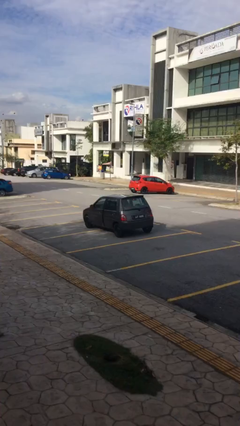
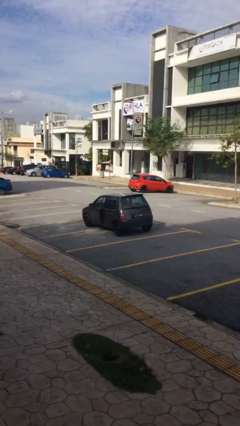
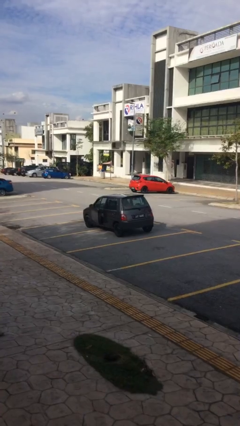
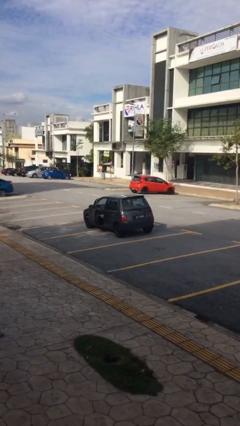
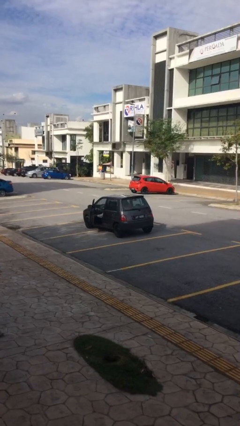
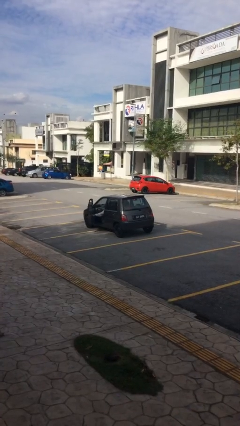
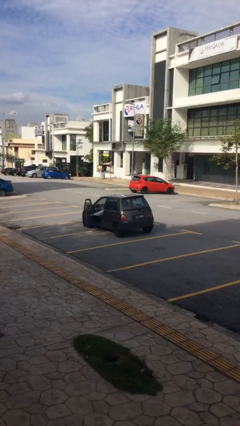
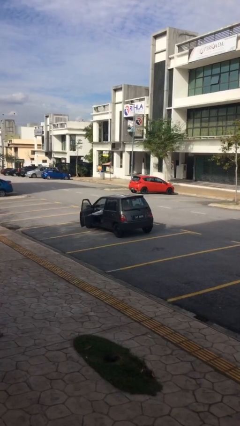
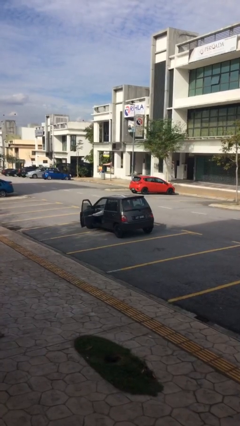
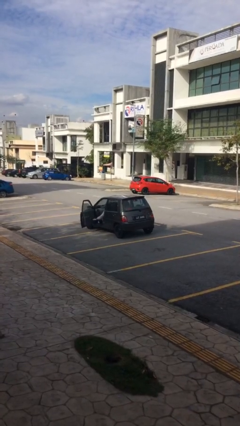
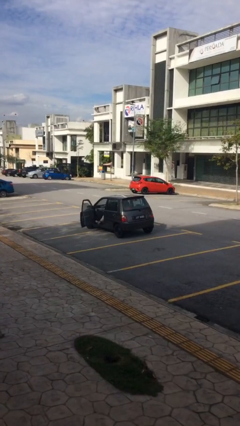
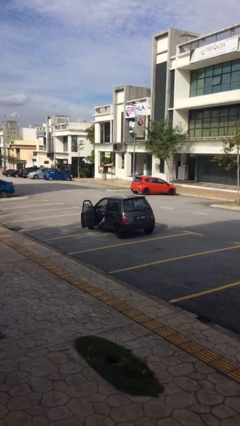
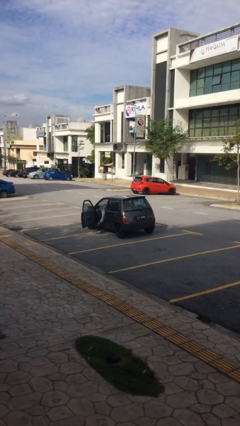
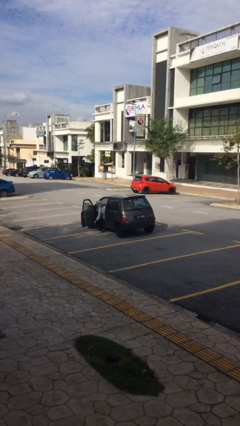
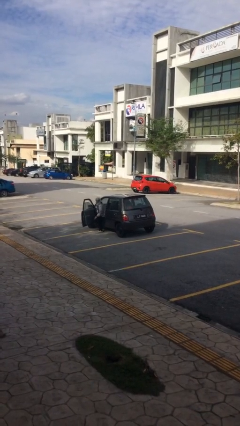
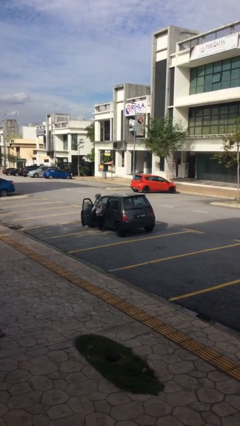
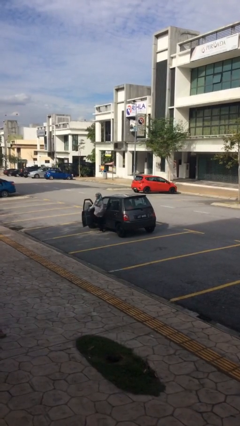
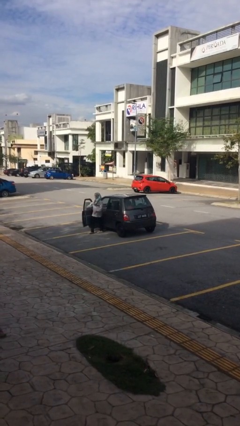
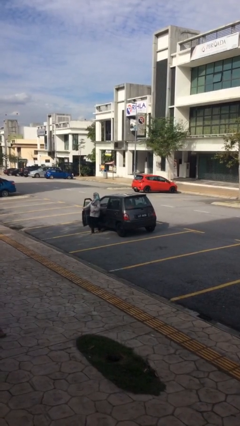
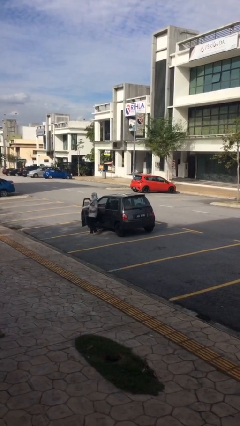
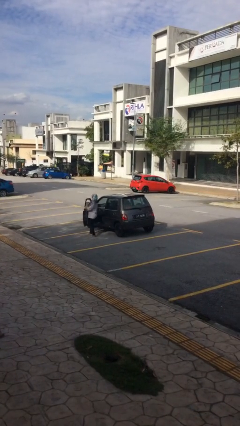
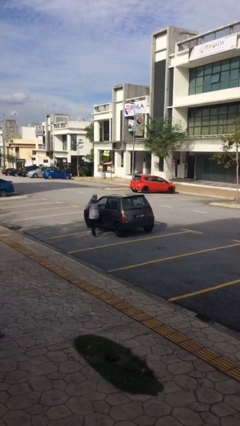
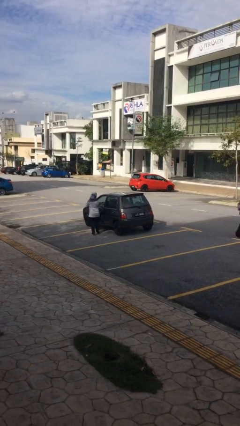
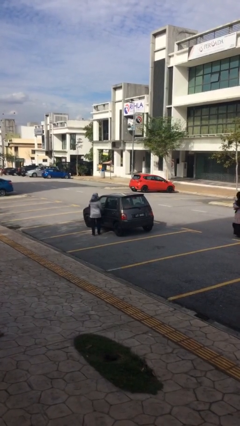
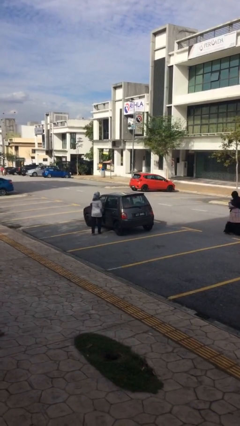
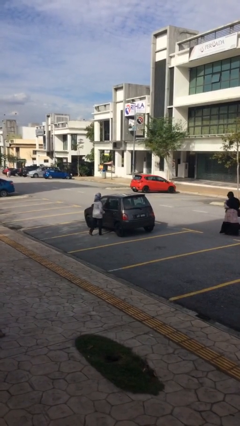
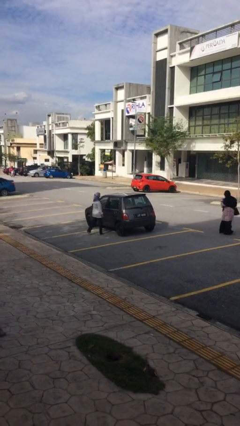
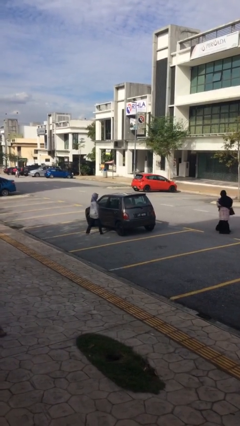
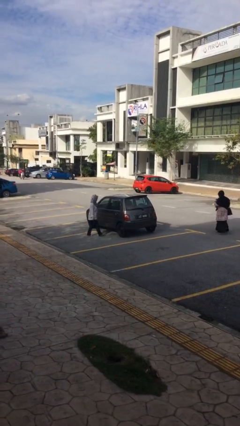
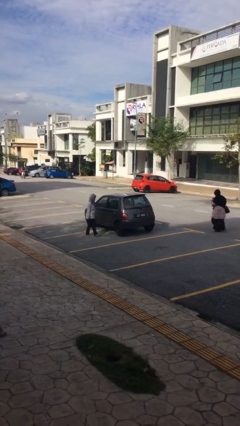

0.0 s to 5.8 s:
car drops off person

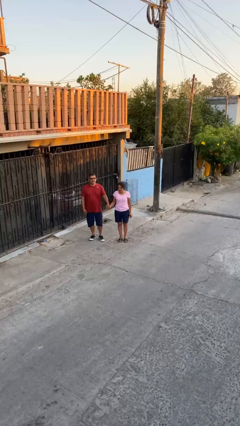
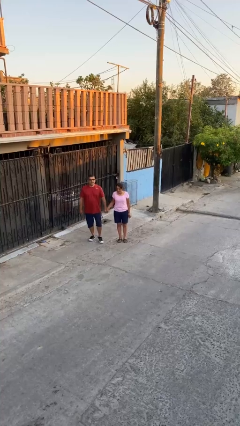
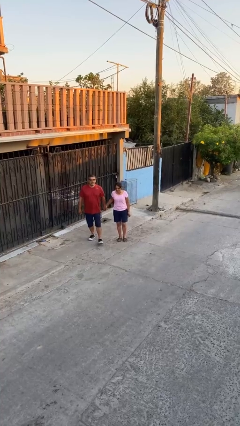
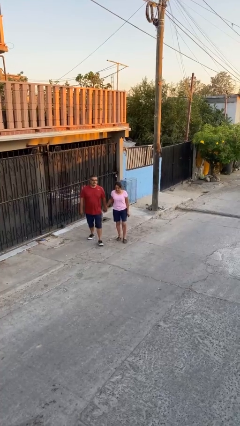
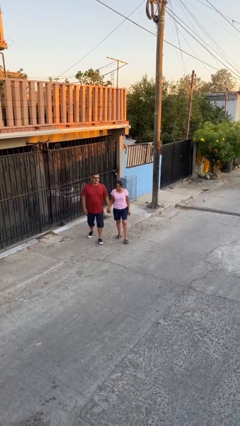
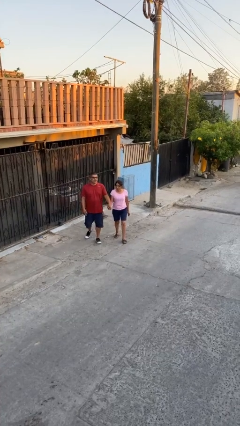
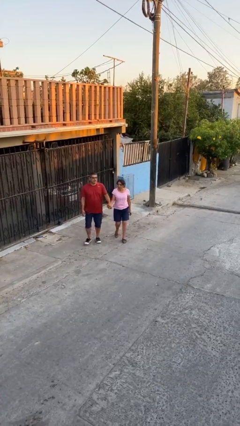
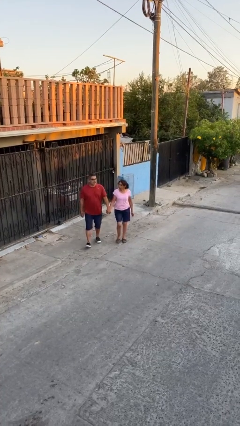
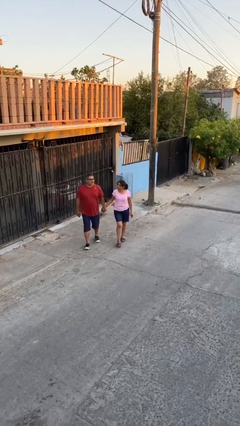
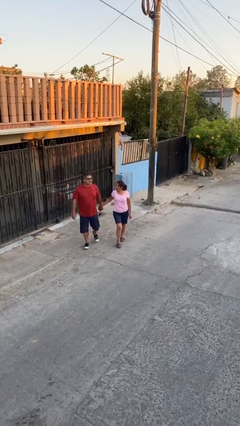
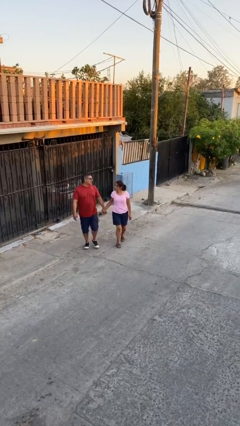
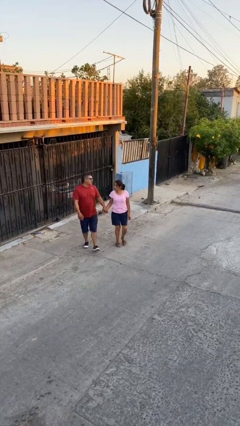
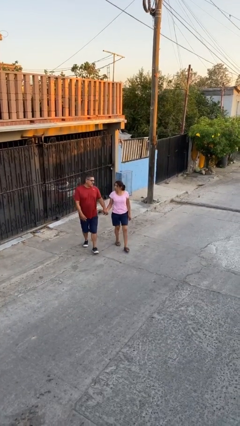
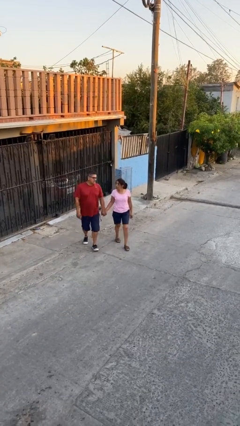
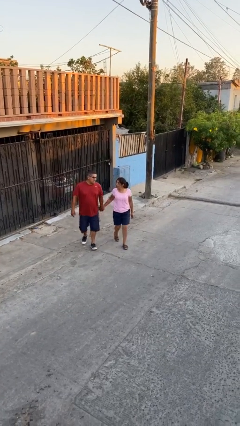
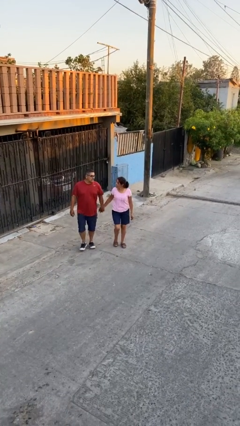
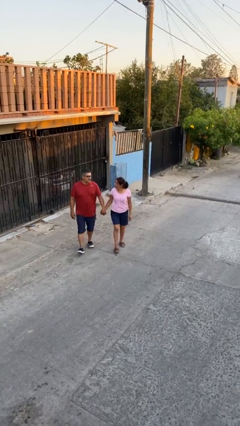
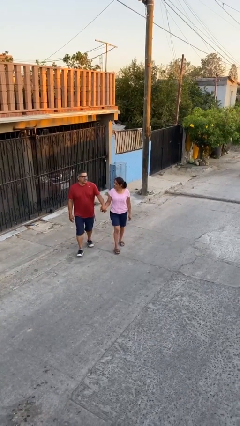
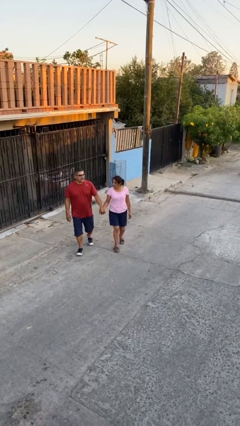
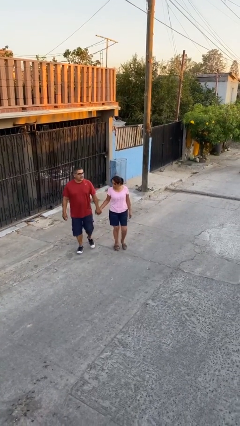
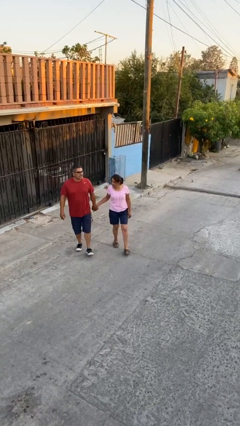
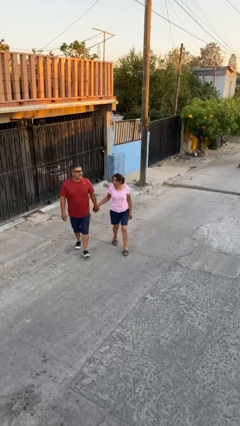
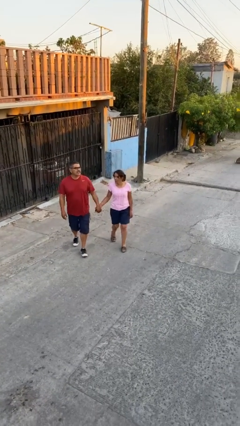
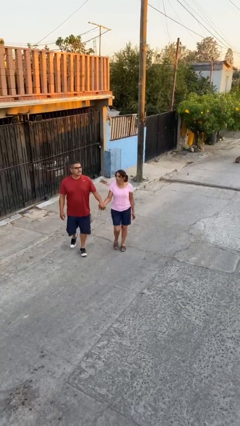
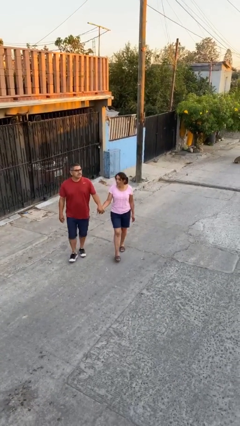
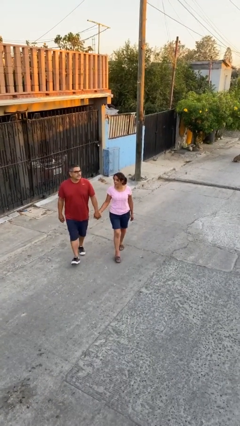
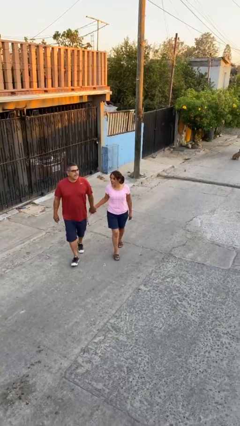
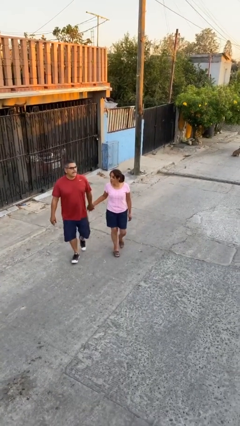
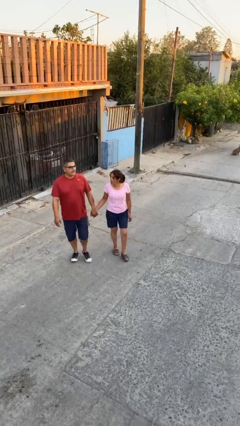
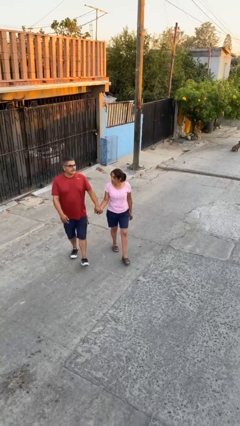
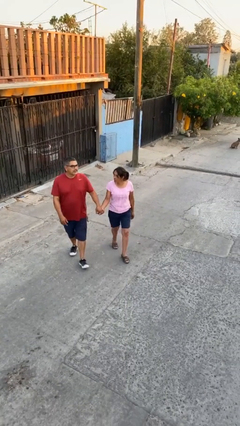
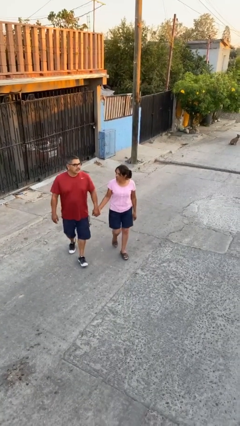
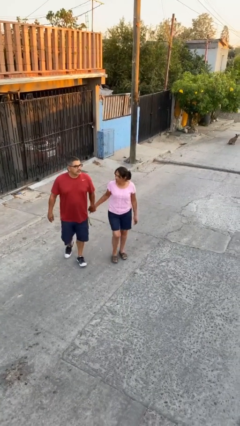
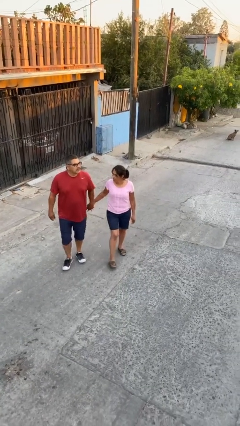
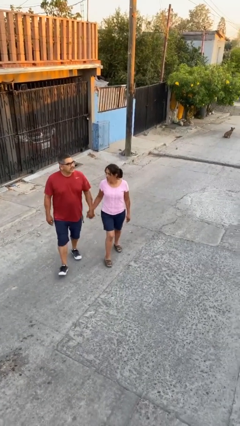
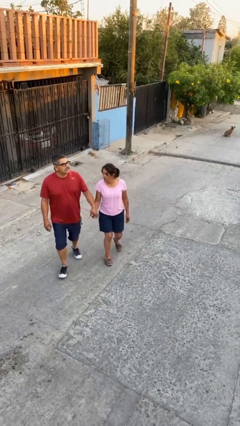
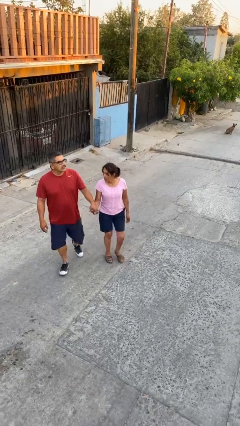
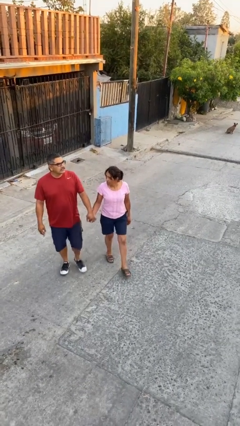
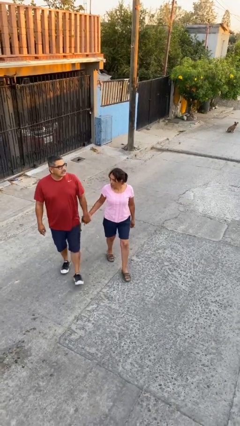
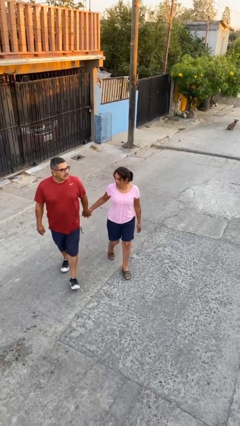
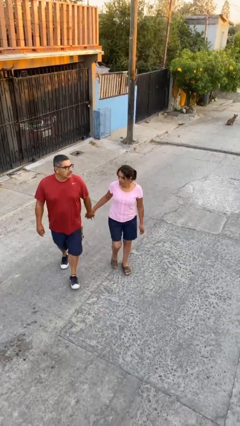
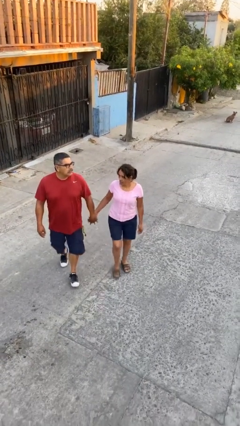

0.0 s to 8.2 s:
person holds hand

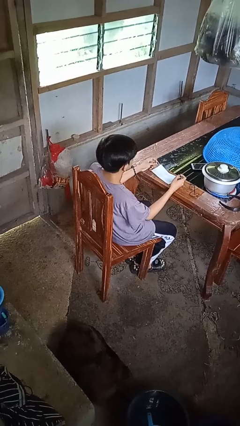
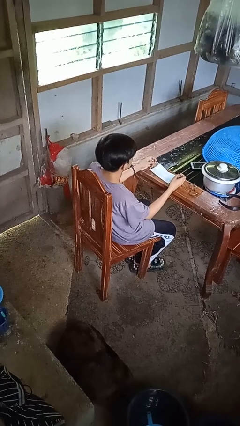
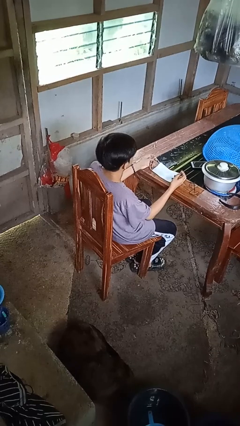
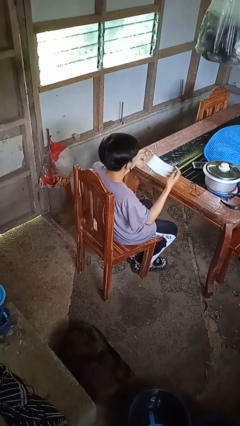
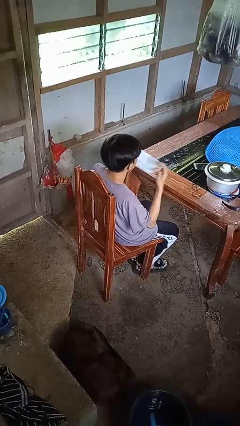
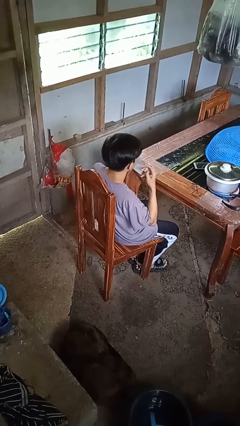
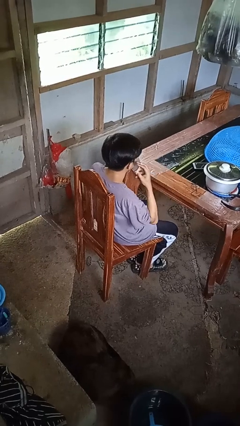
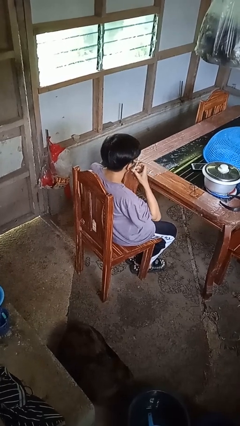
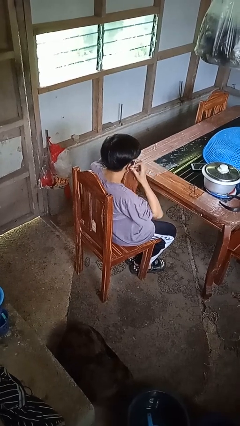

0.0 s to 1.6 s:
person puts on facemask

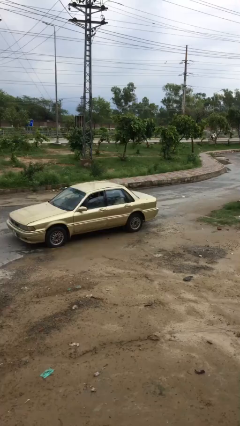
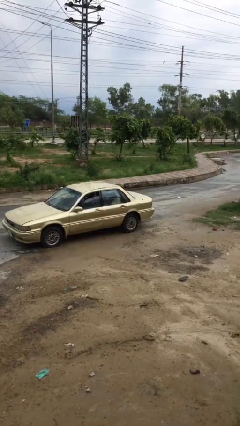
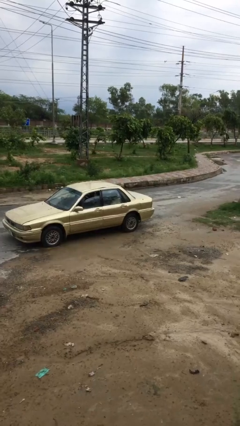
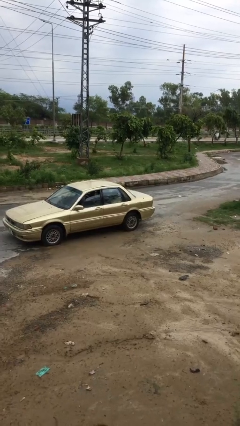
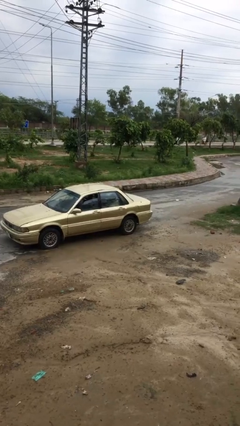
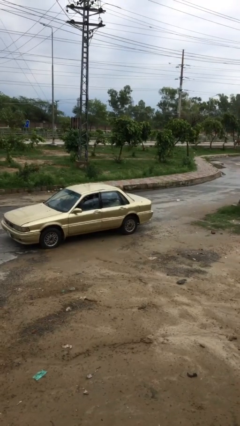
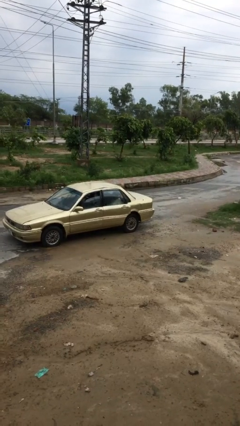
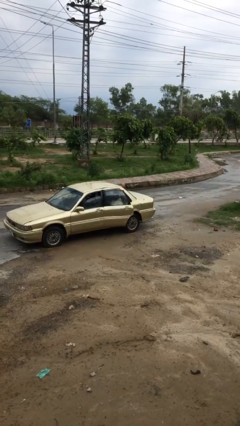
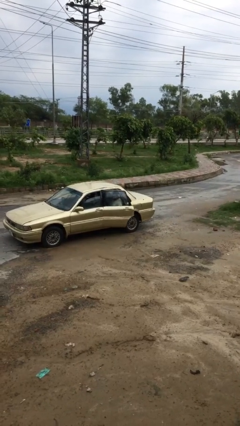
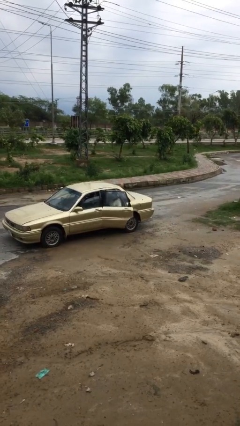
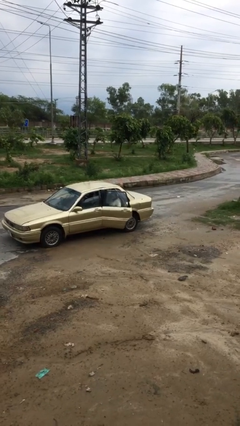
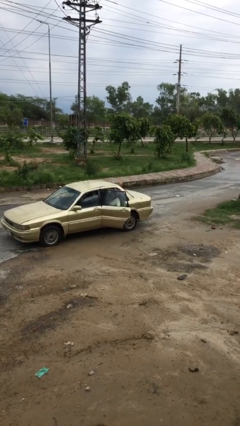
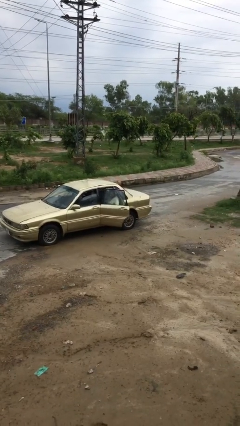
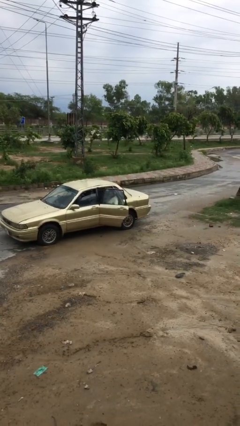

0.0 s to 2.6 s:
person opens car door
